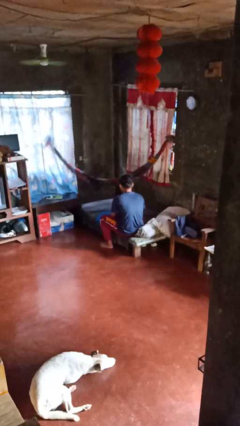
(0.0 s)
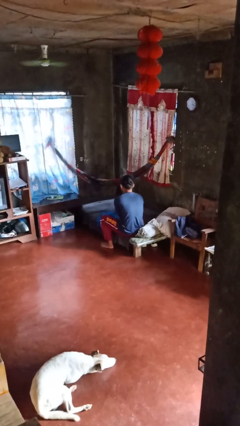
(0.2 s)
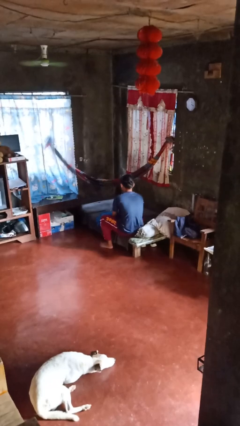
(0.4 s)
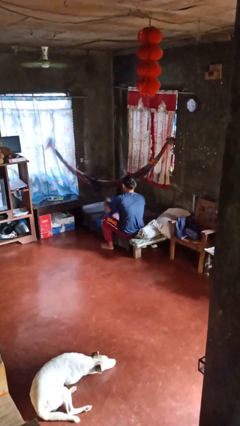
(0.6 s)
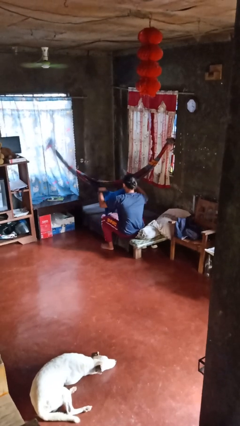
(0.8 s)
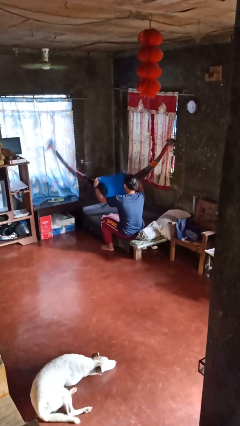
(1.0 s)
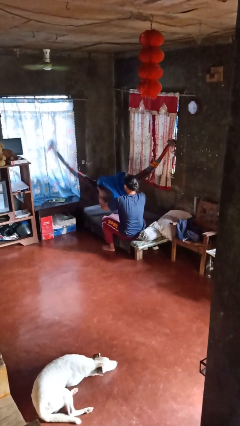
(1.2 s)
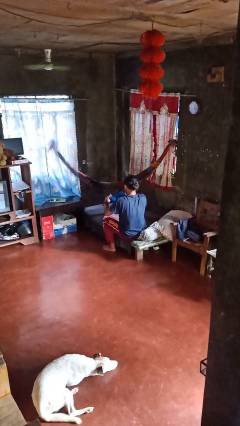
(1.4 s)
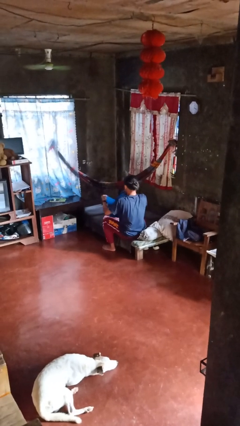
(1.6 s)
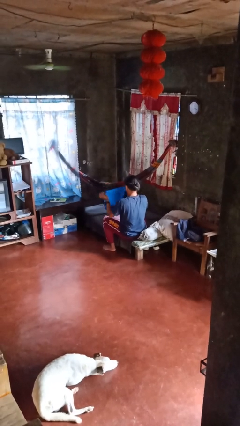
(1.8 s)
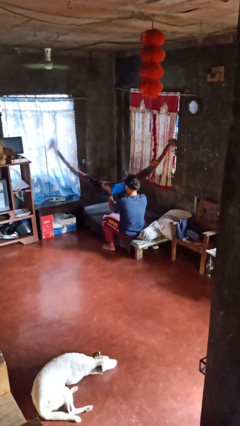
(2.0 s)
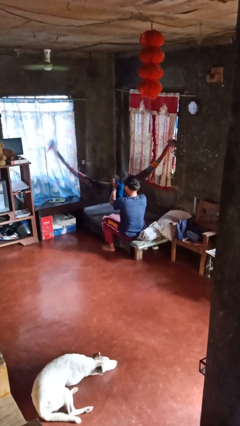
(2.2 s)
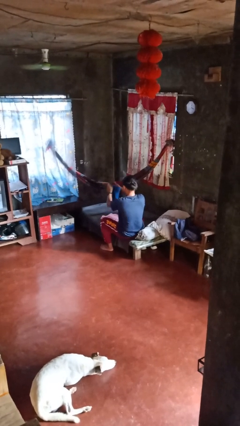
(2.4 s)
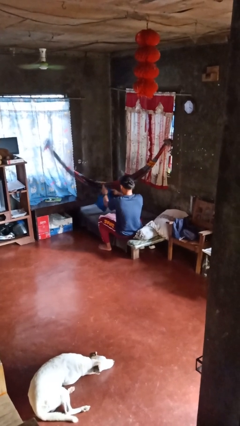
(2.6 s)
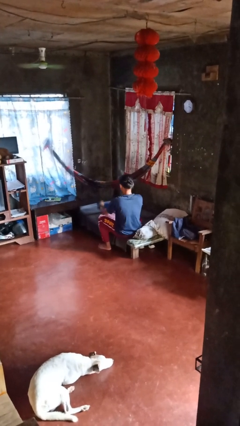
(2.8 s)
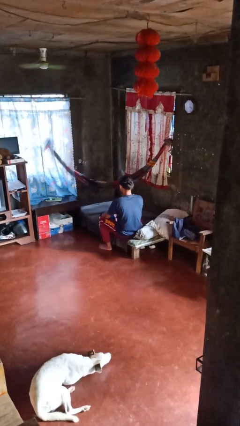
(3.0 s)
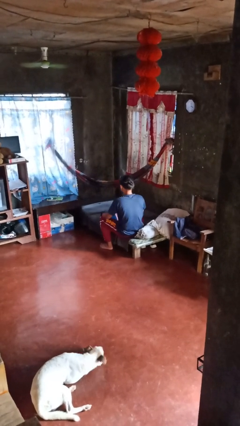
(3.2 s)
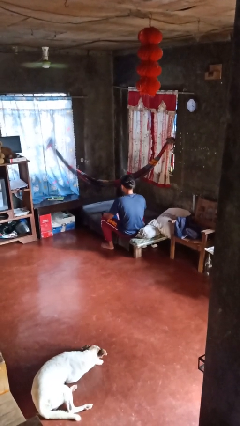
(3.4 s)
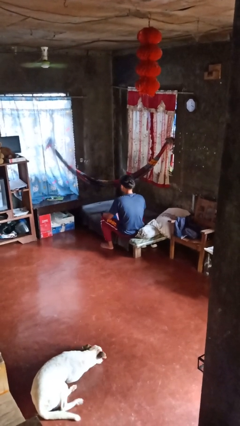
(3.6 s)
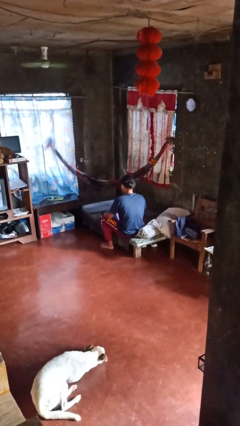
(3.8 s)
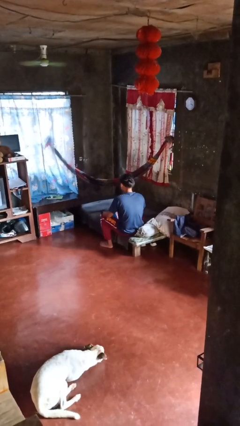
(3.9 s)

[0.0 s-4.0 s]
person folds shirt

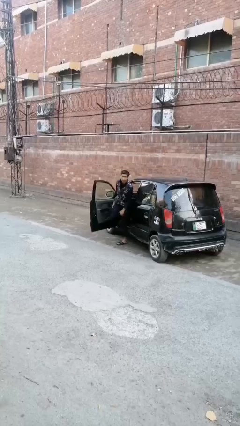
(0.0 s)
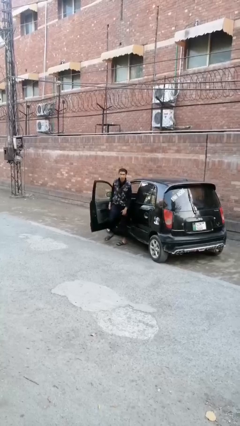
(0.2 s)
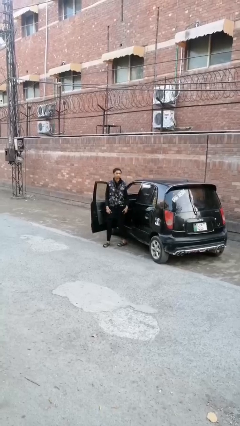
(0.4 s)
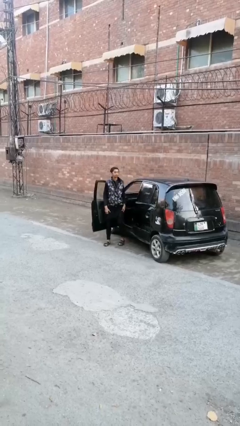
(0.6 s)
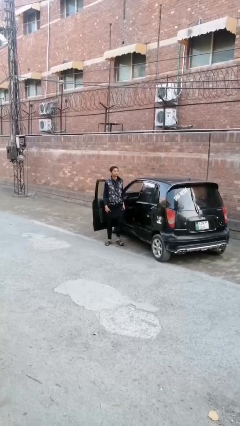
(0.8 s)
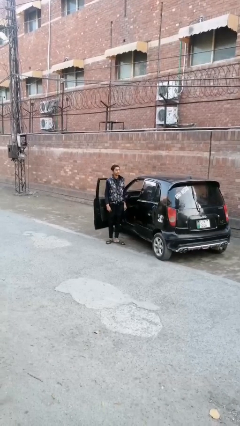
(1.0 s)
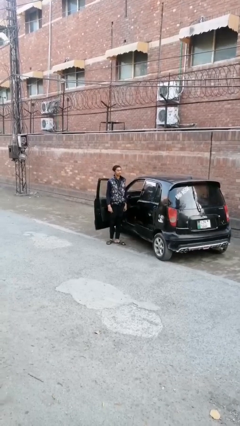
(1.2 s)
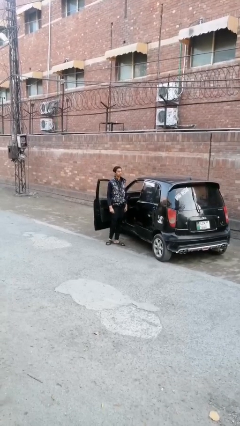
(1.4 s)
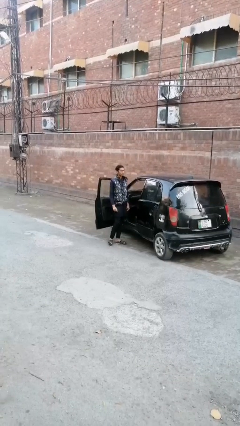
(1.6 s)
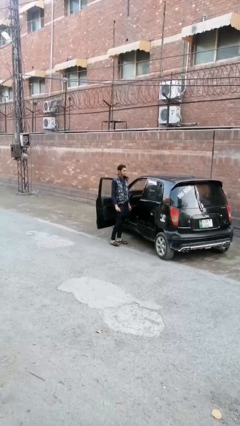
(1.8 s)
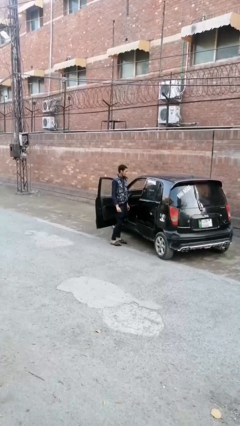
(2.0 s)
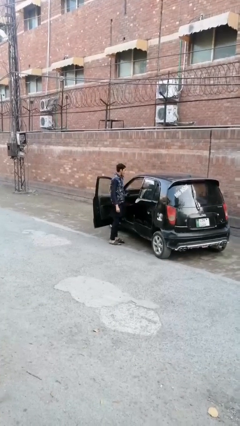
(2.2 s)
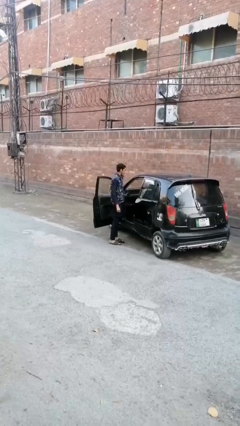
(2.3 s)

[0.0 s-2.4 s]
person exits car

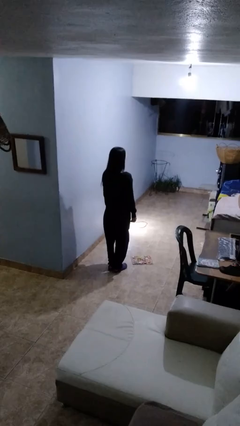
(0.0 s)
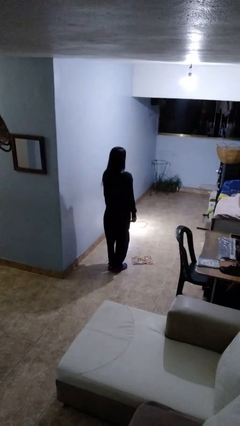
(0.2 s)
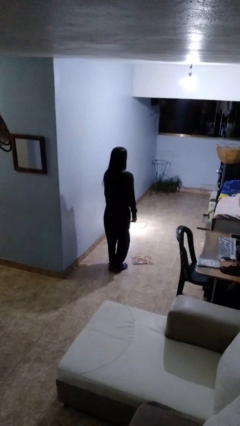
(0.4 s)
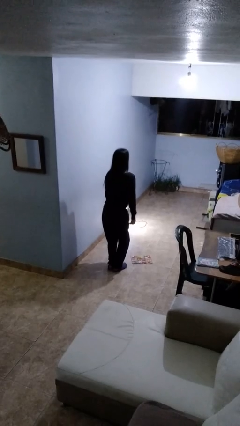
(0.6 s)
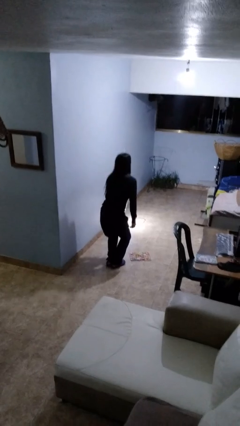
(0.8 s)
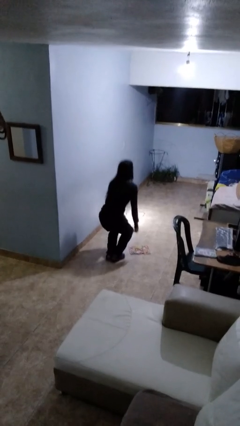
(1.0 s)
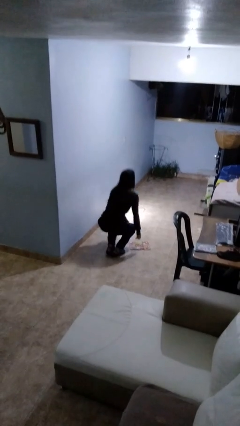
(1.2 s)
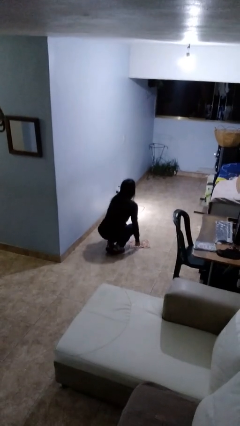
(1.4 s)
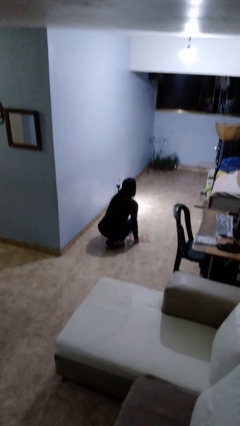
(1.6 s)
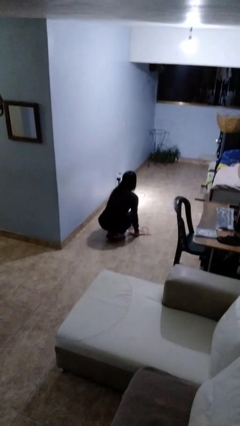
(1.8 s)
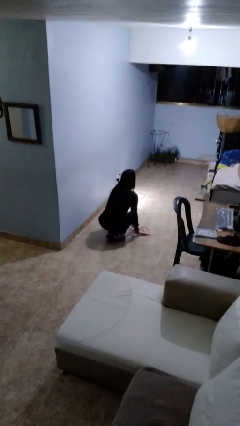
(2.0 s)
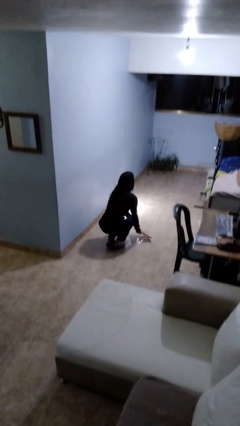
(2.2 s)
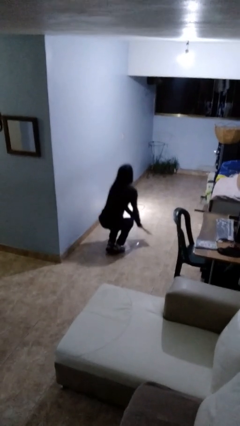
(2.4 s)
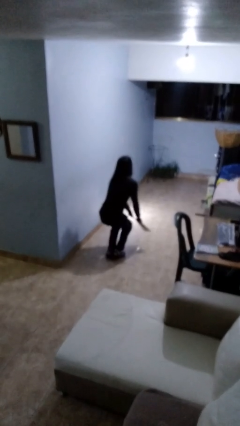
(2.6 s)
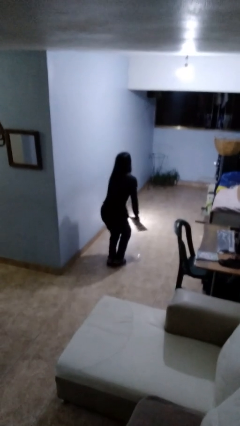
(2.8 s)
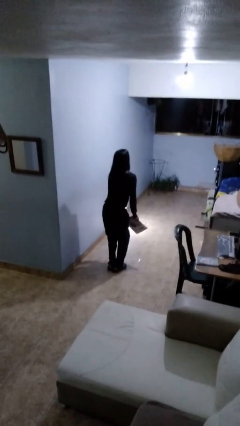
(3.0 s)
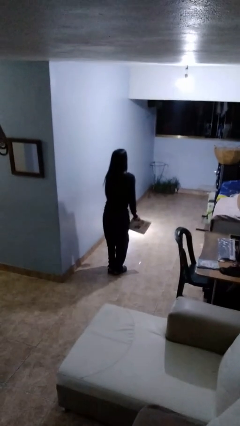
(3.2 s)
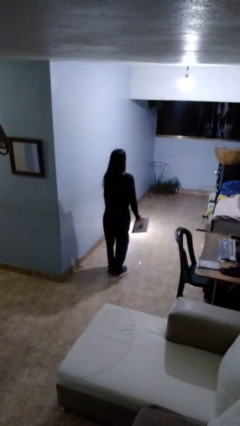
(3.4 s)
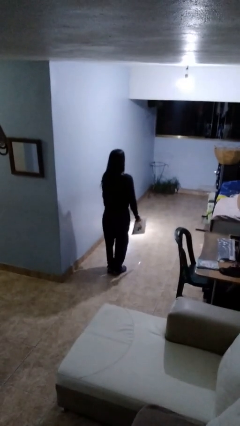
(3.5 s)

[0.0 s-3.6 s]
person picks up object from floor

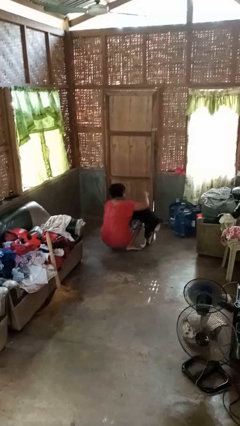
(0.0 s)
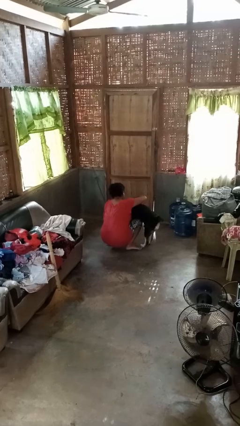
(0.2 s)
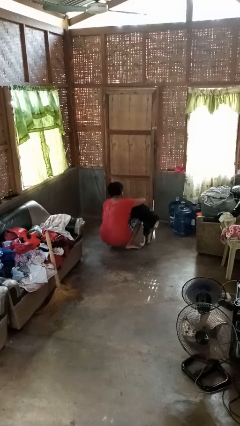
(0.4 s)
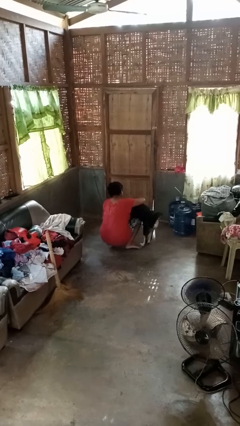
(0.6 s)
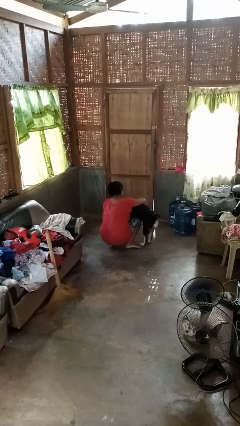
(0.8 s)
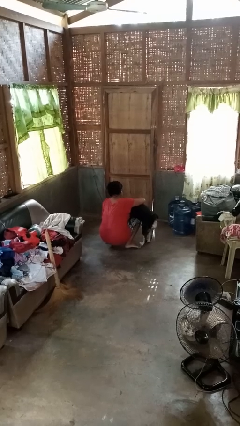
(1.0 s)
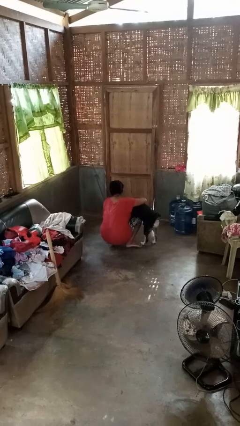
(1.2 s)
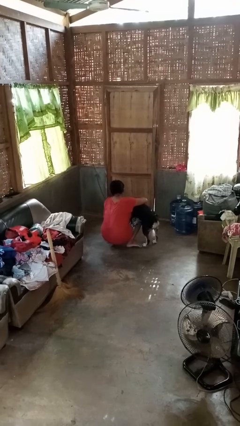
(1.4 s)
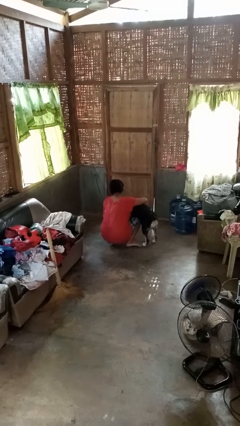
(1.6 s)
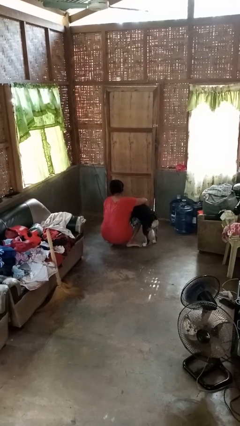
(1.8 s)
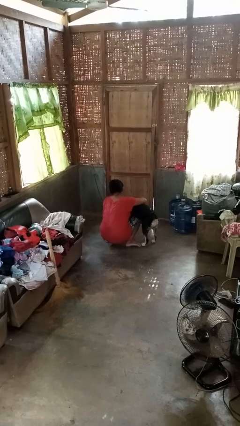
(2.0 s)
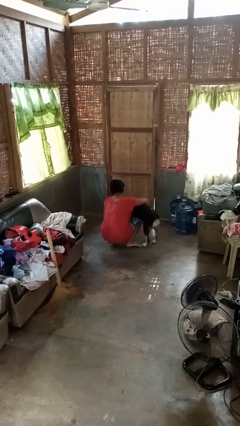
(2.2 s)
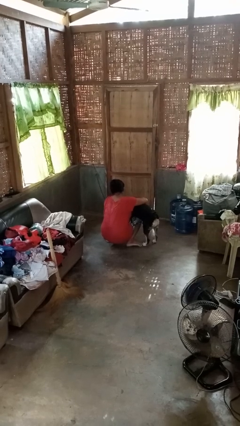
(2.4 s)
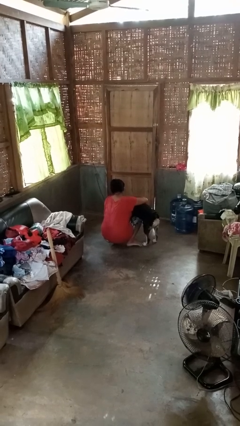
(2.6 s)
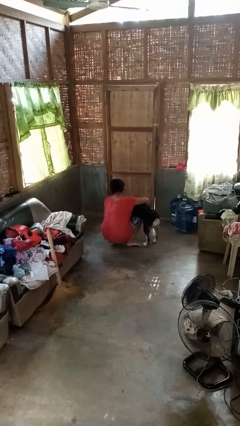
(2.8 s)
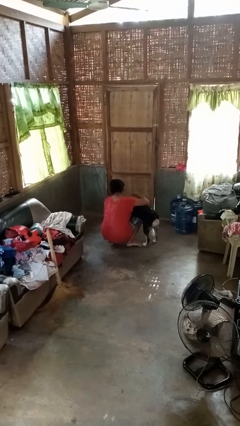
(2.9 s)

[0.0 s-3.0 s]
person hugs dog

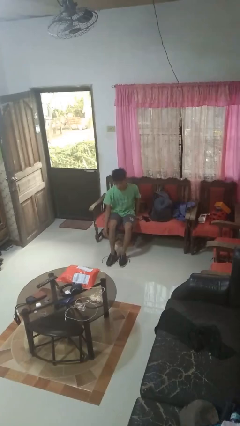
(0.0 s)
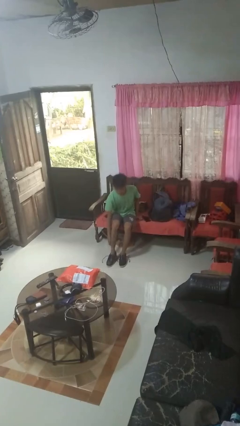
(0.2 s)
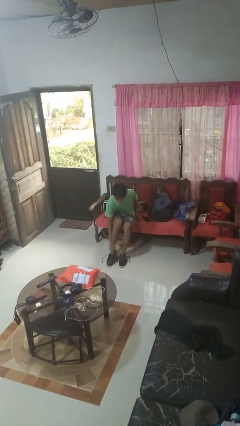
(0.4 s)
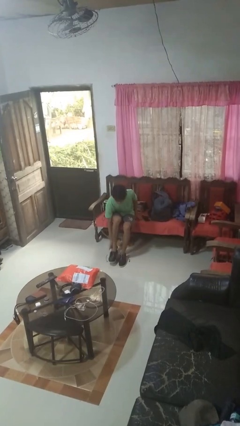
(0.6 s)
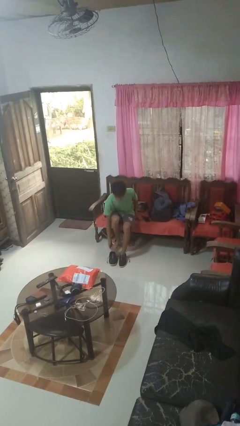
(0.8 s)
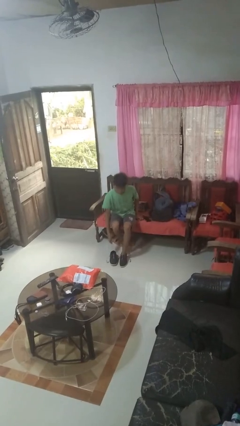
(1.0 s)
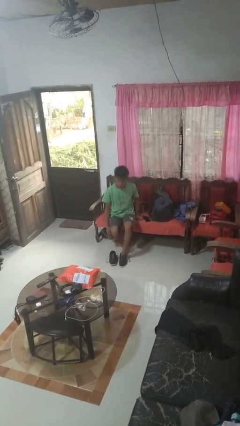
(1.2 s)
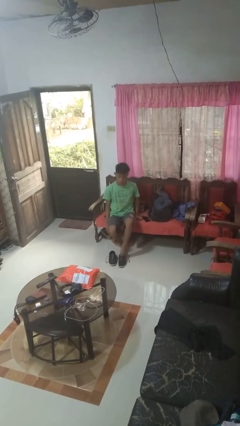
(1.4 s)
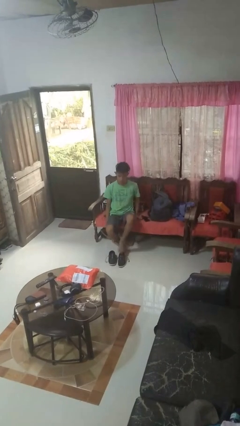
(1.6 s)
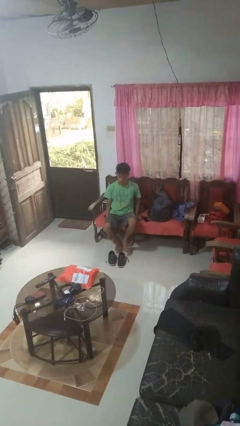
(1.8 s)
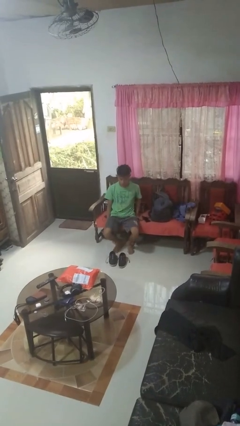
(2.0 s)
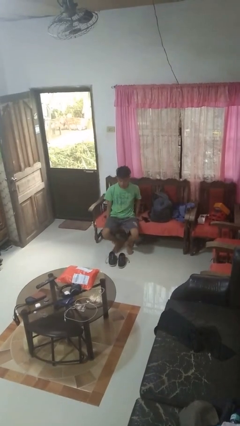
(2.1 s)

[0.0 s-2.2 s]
person takes off shoes

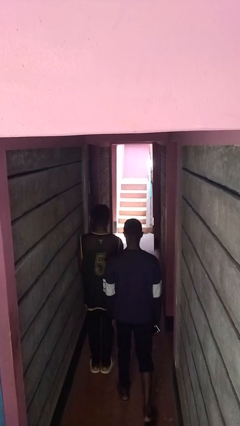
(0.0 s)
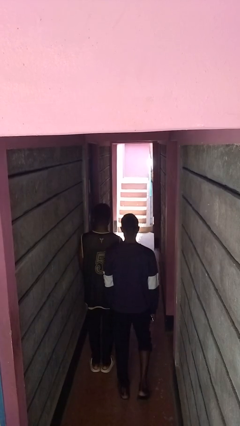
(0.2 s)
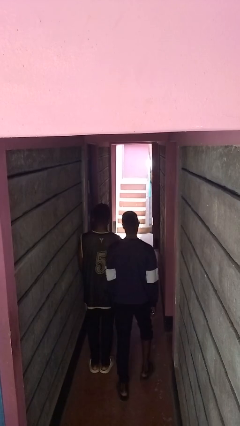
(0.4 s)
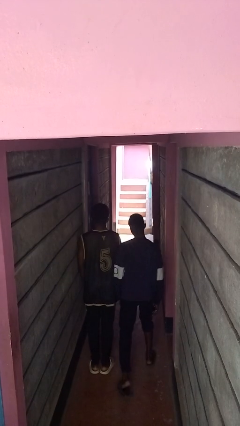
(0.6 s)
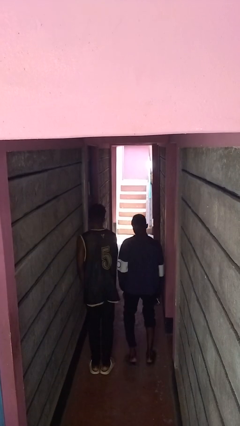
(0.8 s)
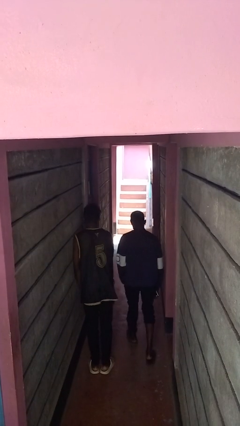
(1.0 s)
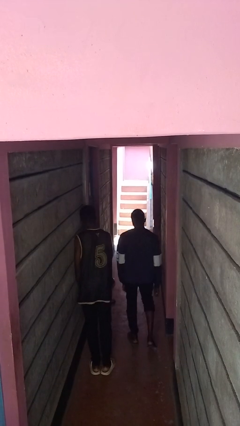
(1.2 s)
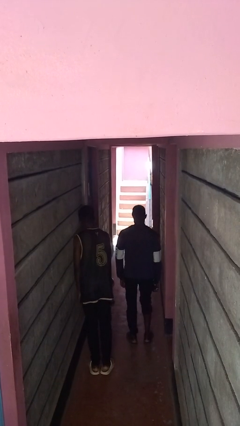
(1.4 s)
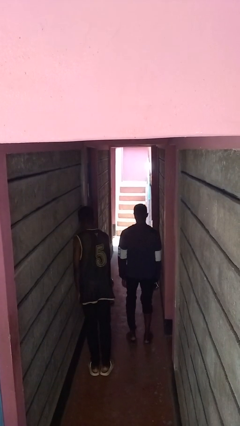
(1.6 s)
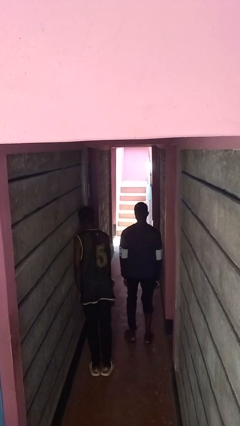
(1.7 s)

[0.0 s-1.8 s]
person bumps into person
